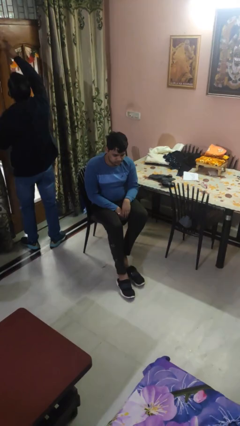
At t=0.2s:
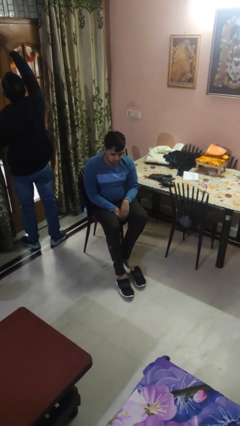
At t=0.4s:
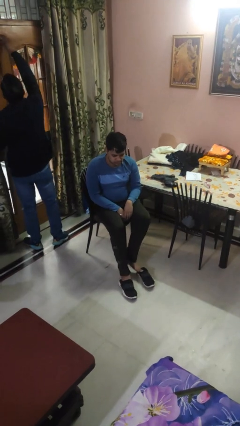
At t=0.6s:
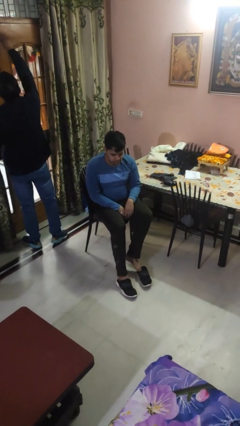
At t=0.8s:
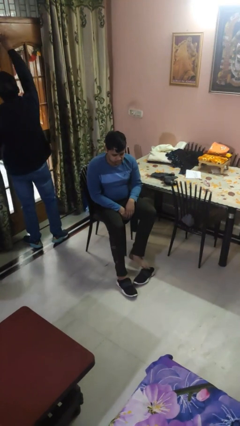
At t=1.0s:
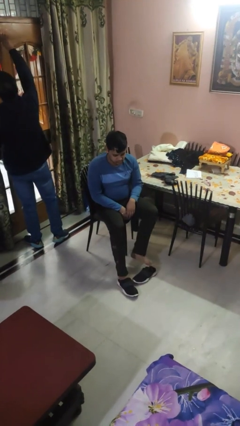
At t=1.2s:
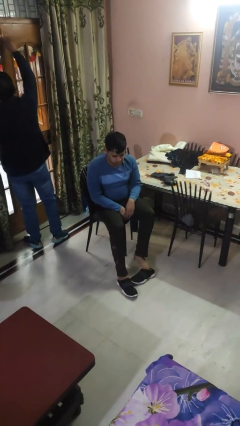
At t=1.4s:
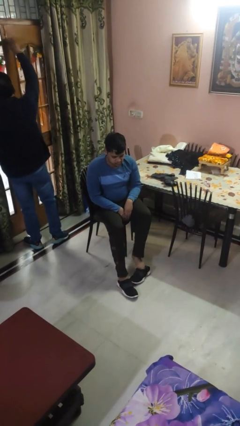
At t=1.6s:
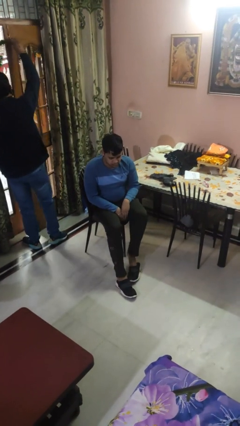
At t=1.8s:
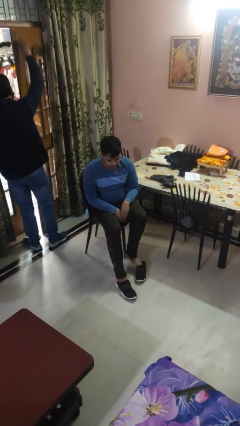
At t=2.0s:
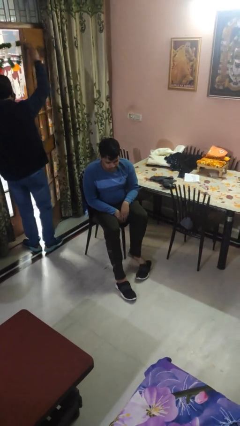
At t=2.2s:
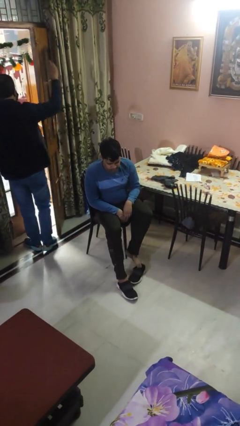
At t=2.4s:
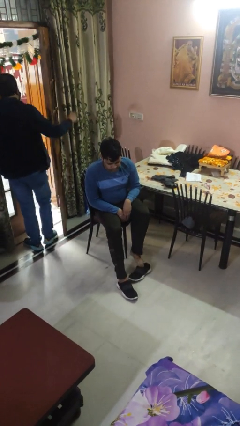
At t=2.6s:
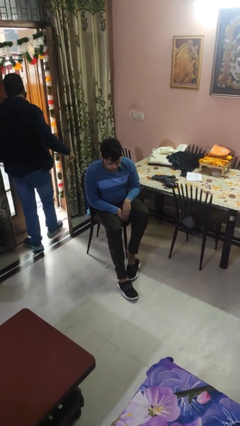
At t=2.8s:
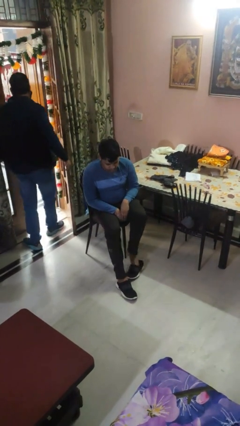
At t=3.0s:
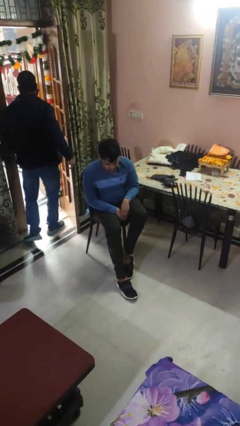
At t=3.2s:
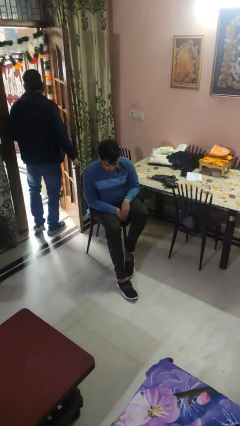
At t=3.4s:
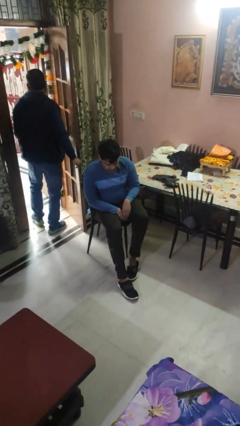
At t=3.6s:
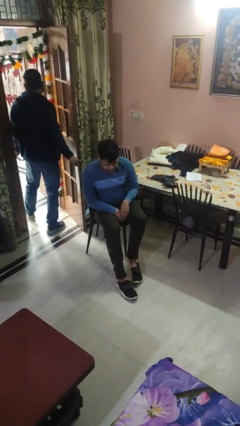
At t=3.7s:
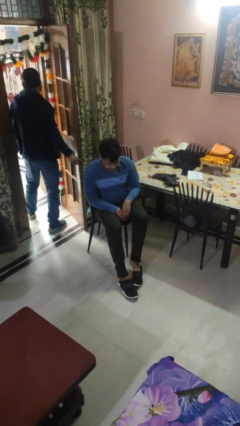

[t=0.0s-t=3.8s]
person puts on shoes

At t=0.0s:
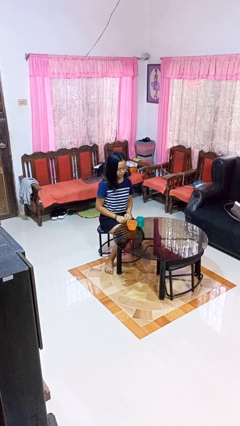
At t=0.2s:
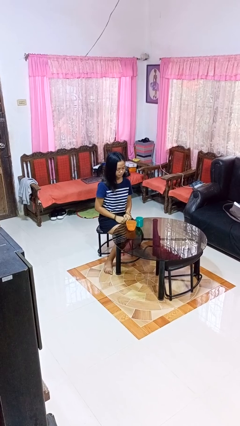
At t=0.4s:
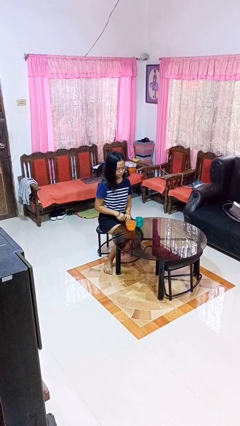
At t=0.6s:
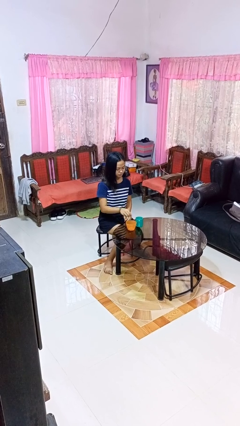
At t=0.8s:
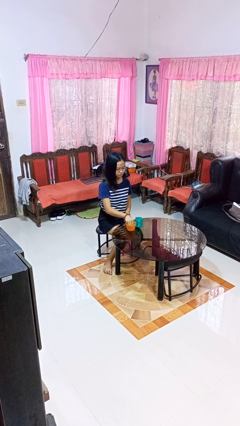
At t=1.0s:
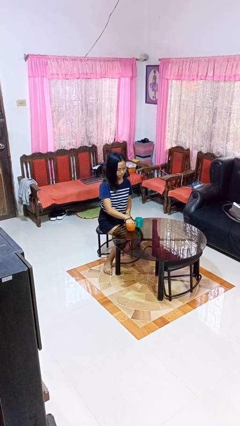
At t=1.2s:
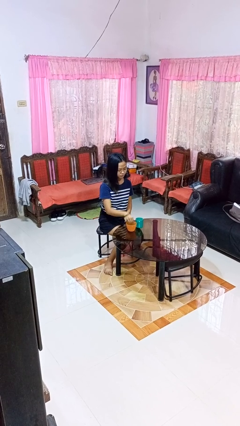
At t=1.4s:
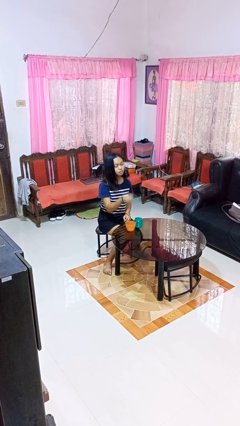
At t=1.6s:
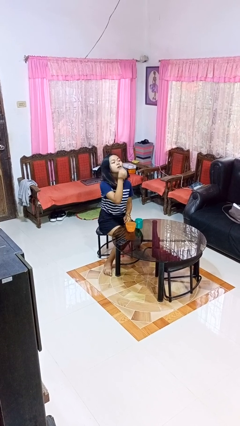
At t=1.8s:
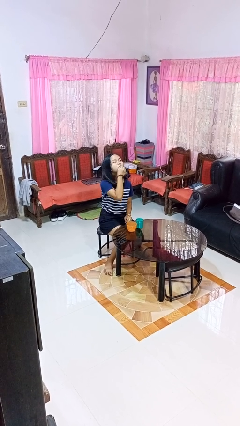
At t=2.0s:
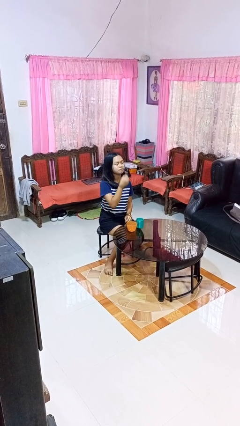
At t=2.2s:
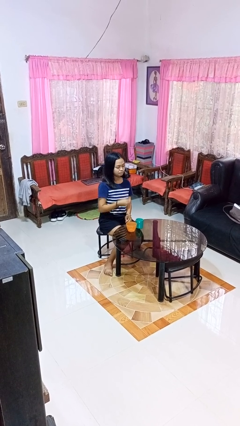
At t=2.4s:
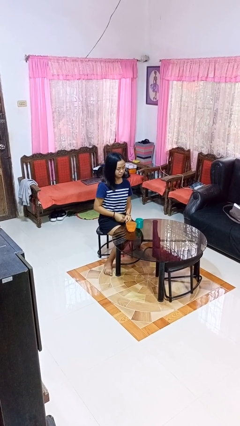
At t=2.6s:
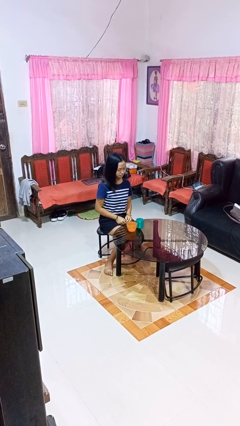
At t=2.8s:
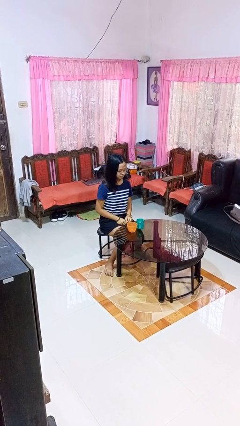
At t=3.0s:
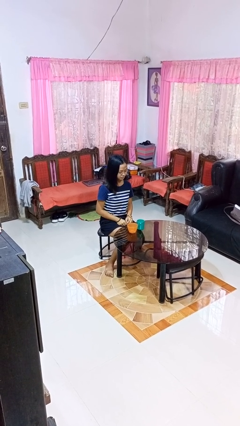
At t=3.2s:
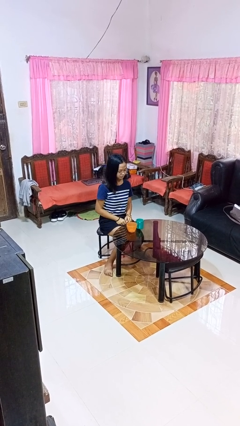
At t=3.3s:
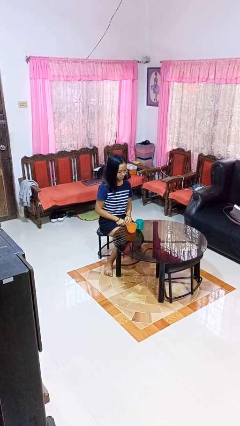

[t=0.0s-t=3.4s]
person takes medicine pills

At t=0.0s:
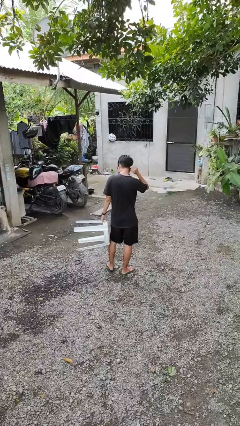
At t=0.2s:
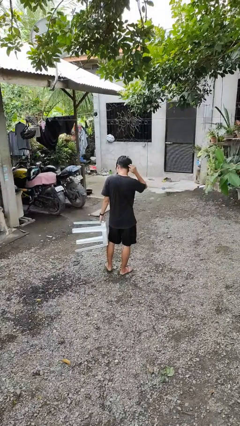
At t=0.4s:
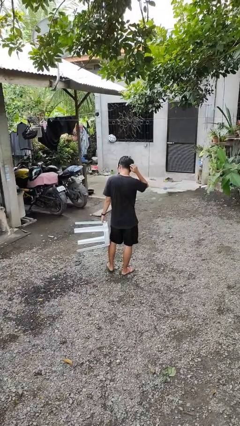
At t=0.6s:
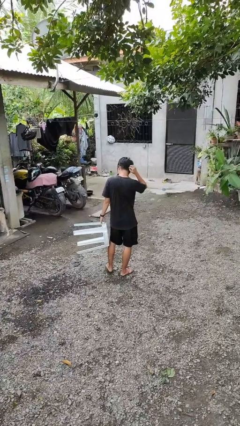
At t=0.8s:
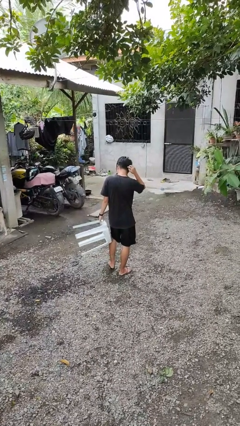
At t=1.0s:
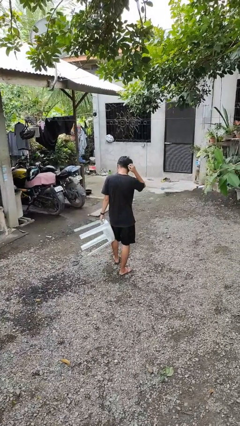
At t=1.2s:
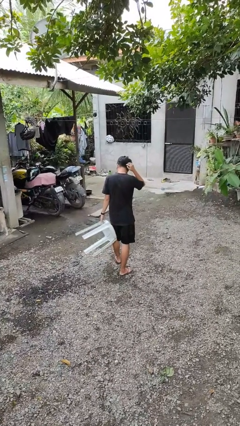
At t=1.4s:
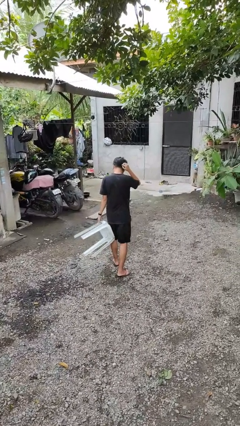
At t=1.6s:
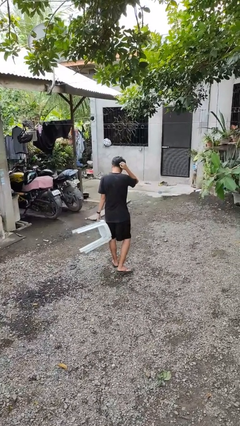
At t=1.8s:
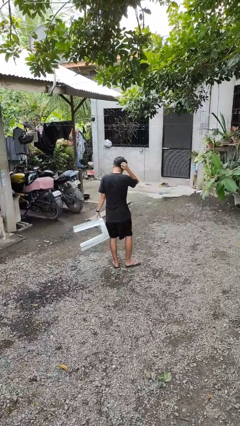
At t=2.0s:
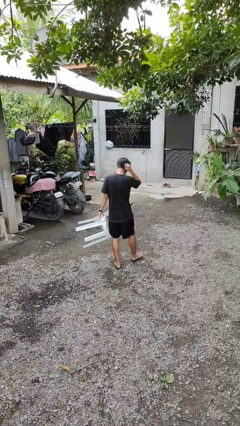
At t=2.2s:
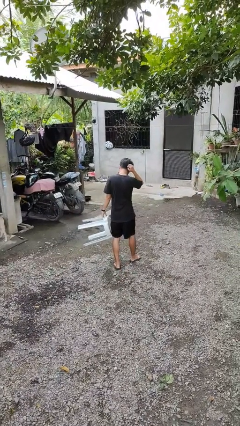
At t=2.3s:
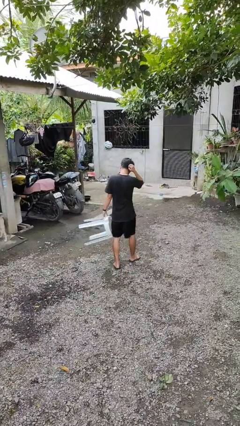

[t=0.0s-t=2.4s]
person carries furniture

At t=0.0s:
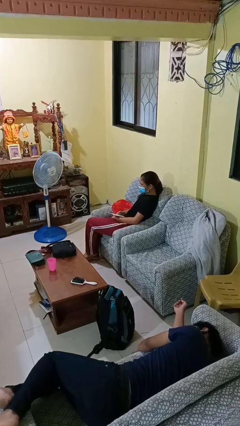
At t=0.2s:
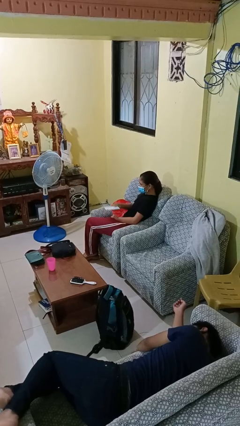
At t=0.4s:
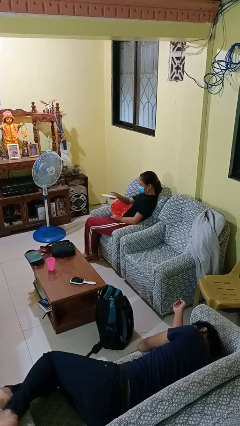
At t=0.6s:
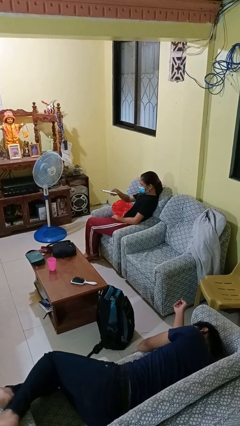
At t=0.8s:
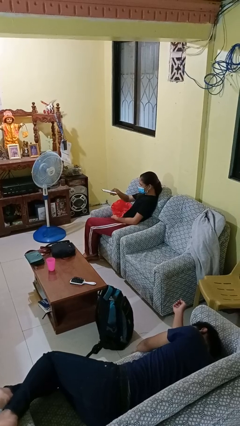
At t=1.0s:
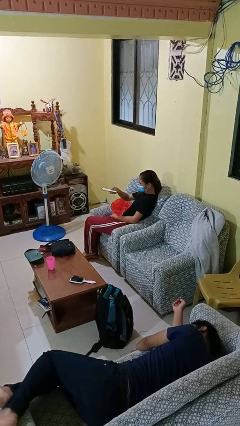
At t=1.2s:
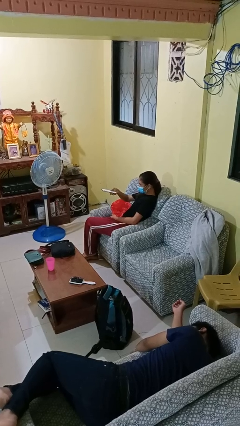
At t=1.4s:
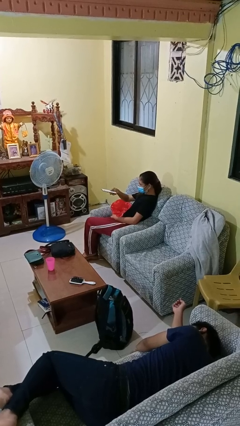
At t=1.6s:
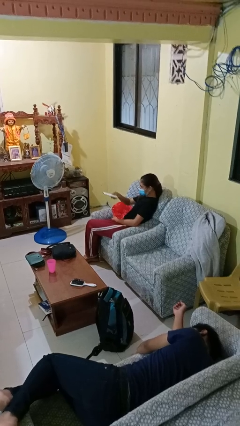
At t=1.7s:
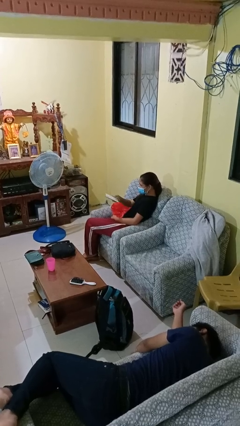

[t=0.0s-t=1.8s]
person uses television remote

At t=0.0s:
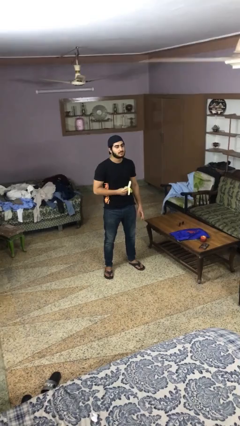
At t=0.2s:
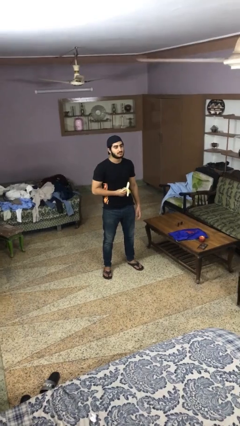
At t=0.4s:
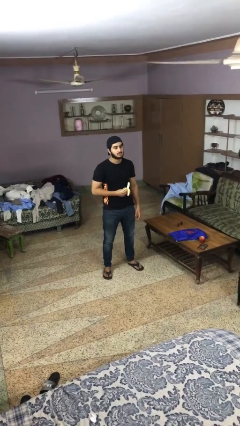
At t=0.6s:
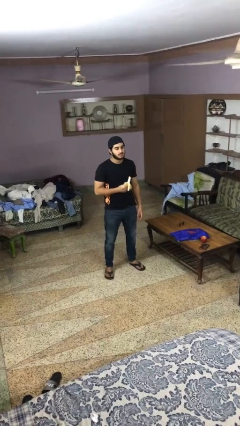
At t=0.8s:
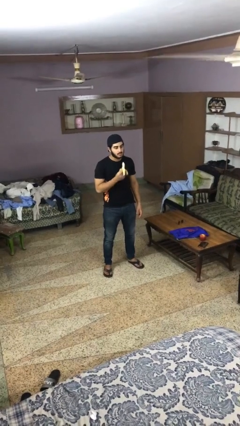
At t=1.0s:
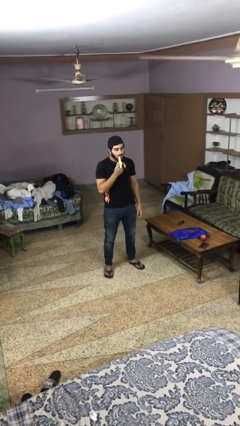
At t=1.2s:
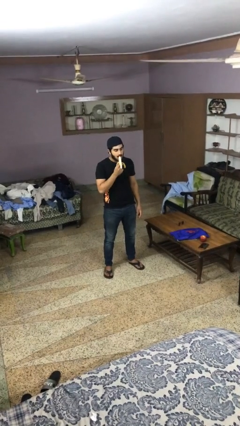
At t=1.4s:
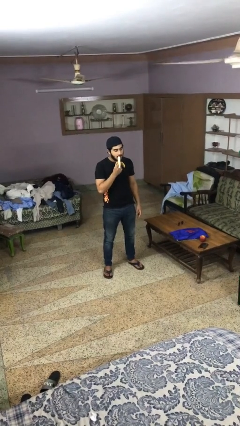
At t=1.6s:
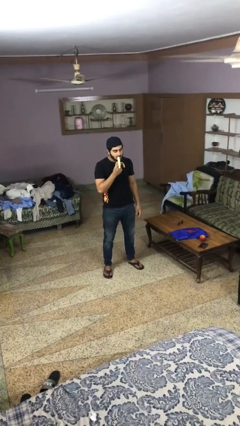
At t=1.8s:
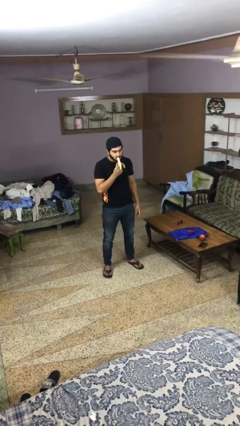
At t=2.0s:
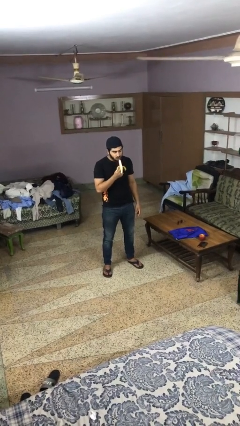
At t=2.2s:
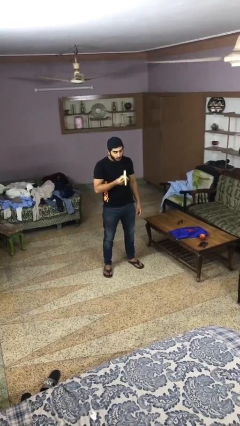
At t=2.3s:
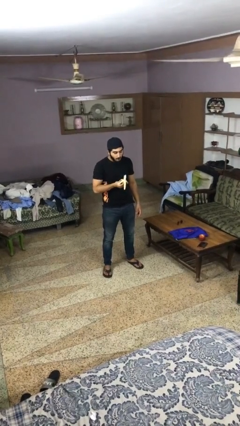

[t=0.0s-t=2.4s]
person eats banana

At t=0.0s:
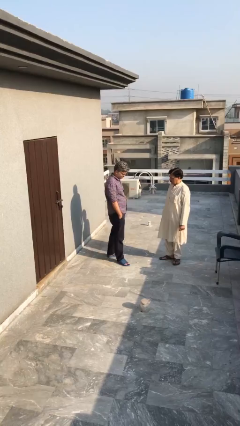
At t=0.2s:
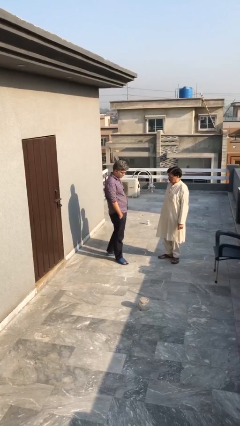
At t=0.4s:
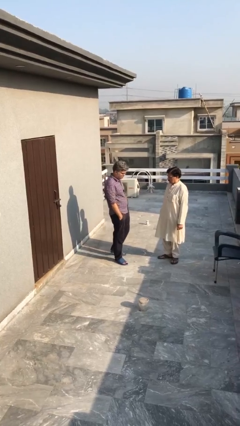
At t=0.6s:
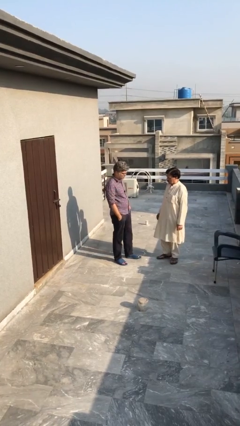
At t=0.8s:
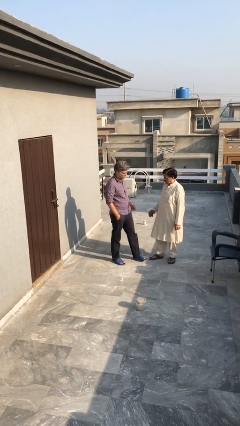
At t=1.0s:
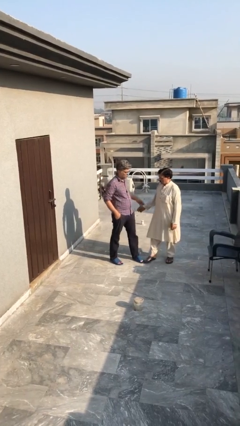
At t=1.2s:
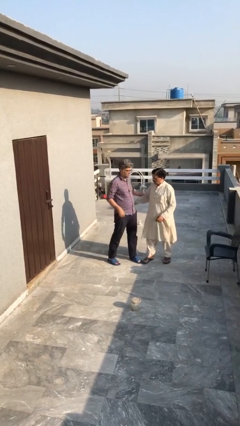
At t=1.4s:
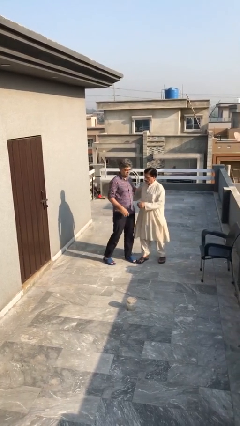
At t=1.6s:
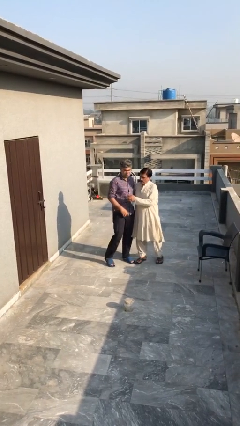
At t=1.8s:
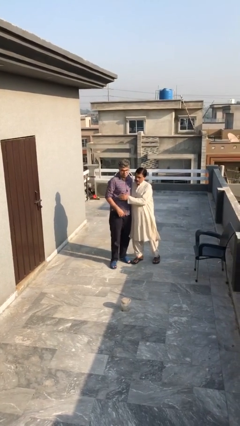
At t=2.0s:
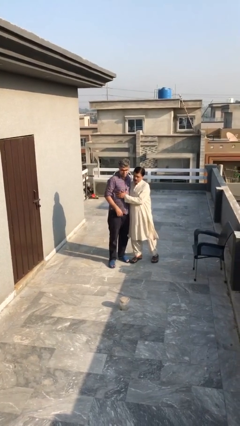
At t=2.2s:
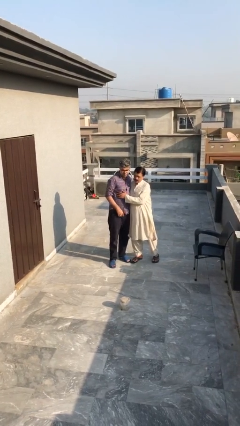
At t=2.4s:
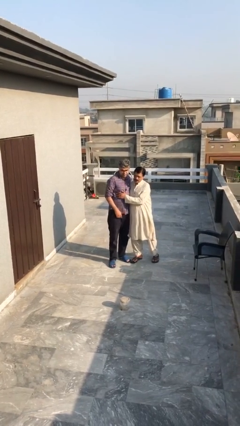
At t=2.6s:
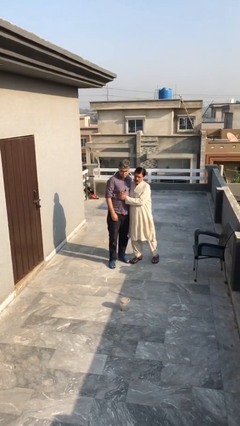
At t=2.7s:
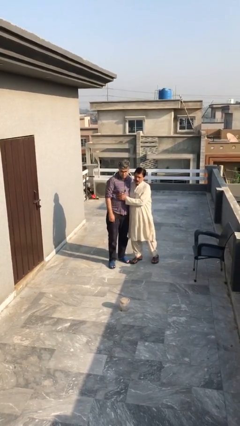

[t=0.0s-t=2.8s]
person embraces person

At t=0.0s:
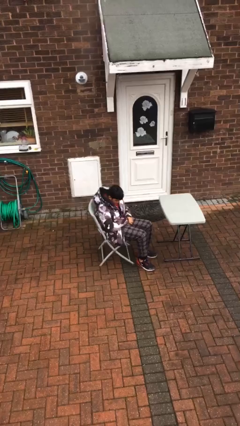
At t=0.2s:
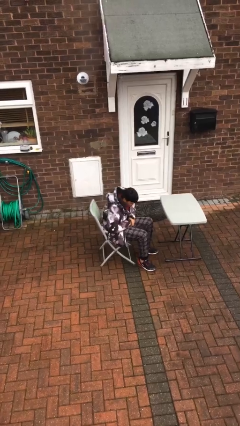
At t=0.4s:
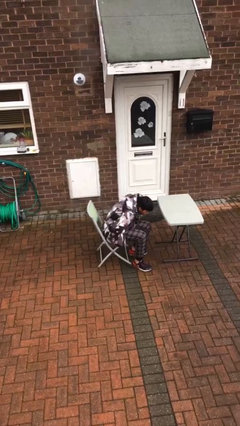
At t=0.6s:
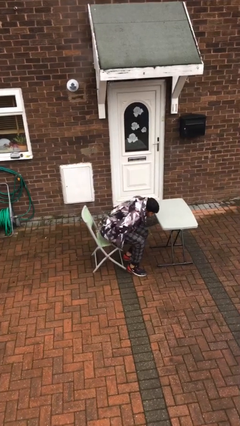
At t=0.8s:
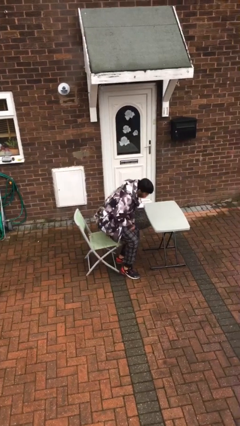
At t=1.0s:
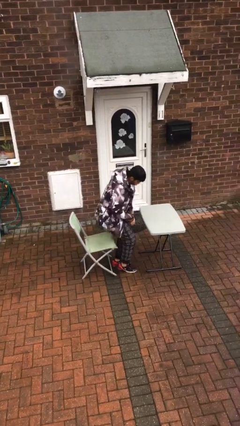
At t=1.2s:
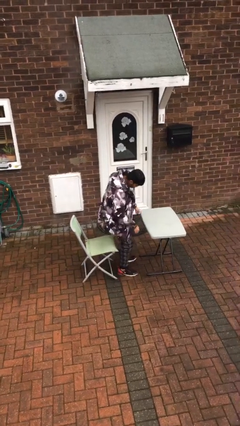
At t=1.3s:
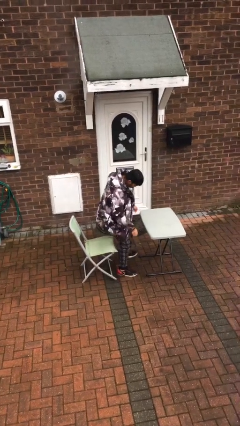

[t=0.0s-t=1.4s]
person stands up
